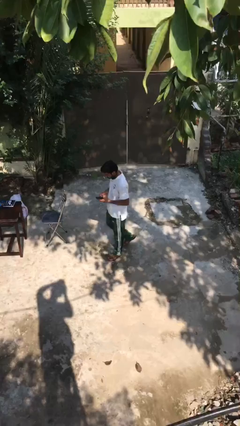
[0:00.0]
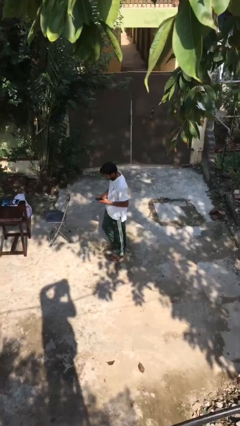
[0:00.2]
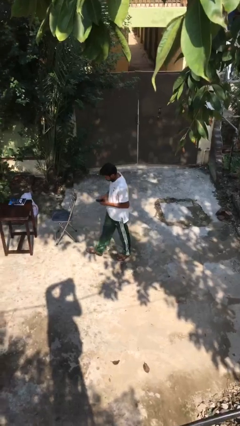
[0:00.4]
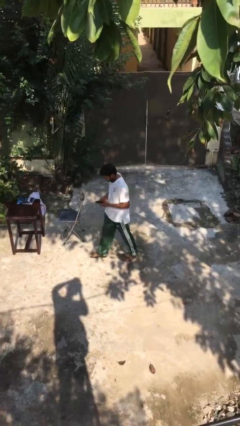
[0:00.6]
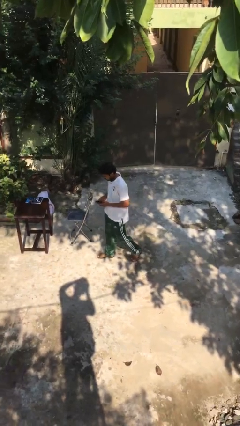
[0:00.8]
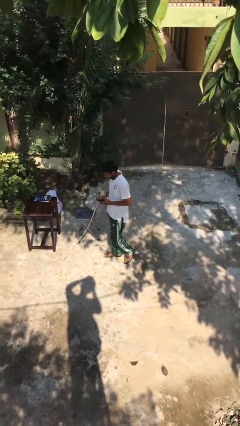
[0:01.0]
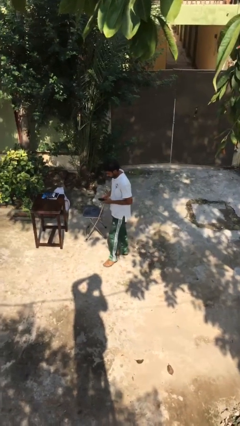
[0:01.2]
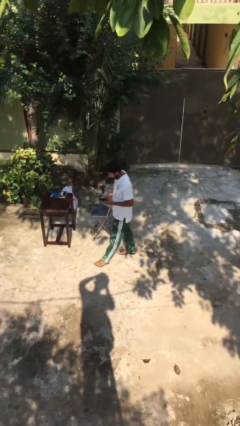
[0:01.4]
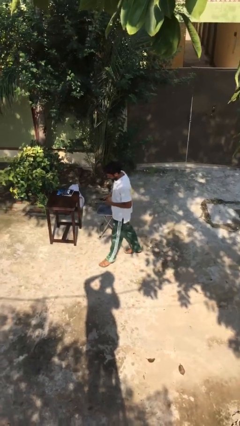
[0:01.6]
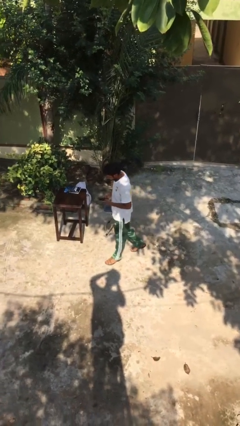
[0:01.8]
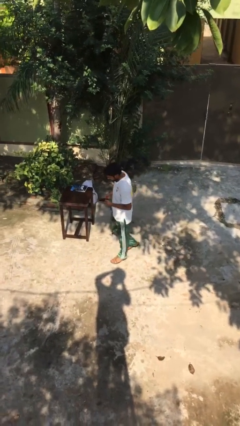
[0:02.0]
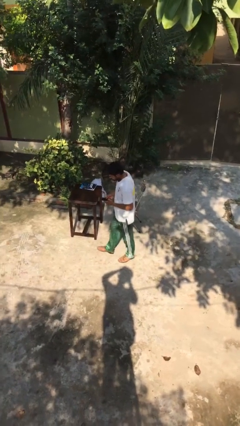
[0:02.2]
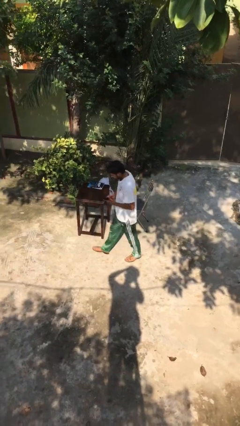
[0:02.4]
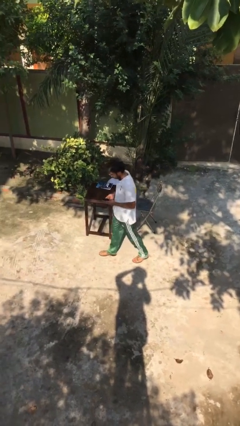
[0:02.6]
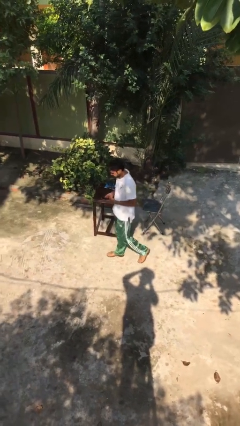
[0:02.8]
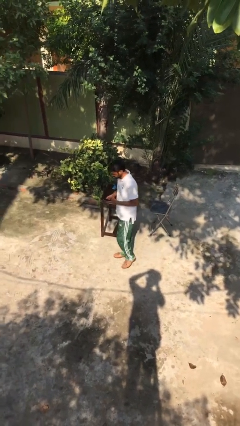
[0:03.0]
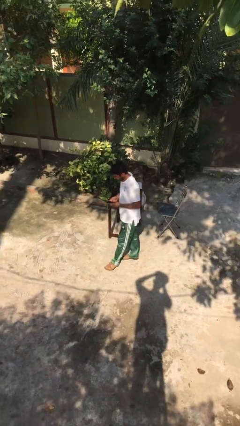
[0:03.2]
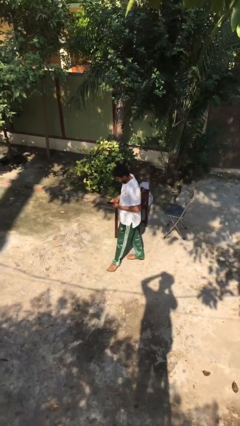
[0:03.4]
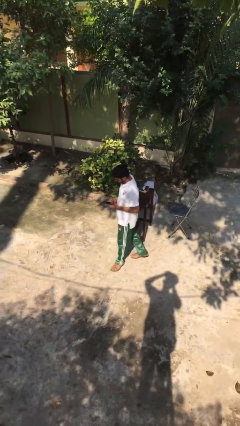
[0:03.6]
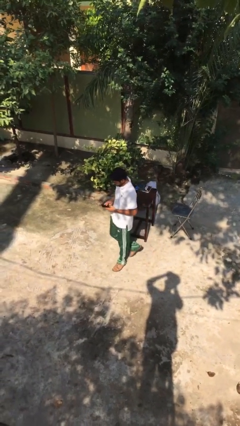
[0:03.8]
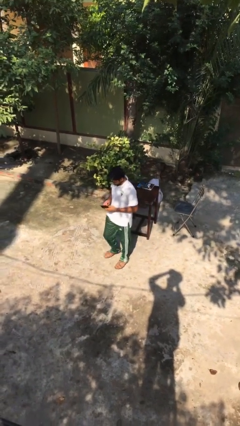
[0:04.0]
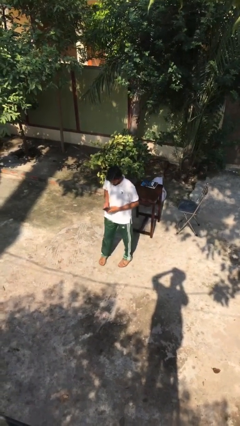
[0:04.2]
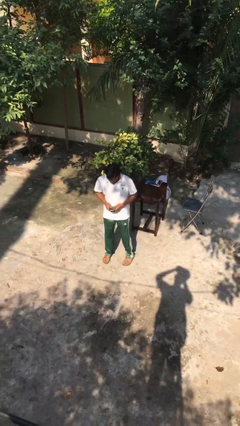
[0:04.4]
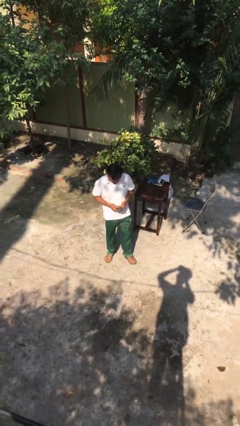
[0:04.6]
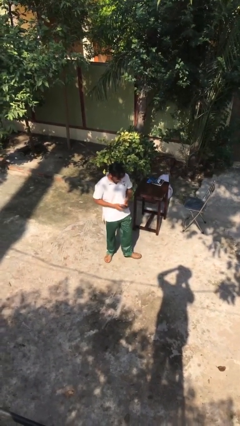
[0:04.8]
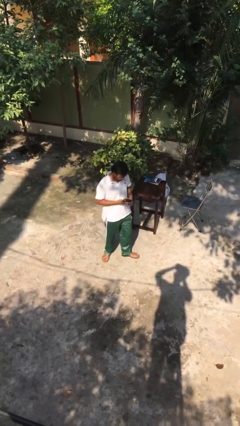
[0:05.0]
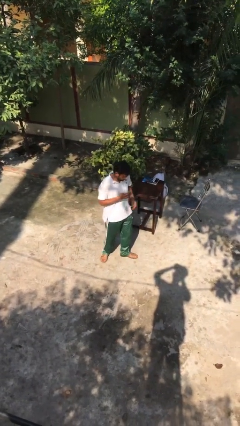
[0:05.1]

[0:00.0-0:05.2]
person texts on phone

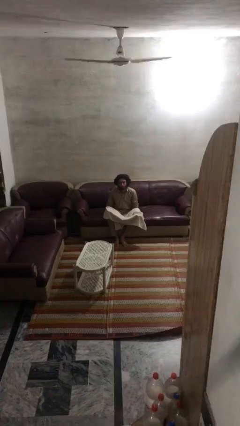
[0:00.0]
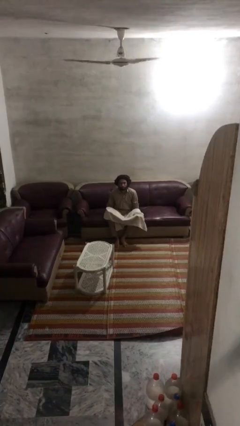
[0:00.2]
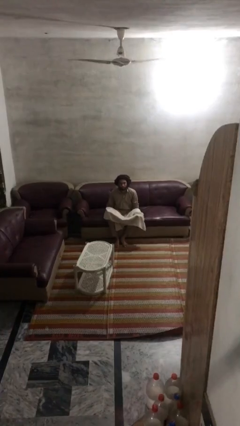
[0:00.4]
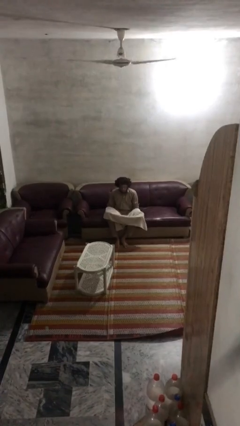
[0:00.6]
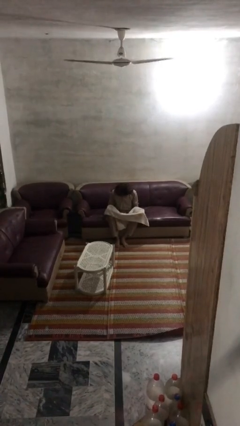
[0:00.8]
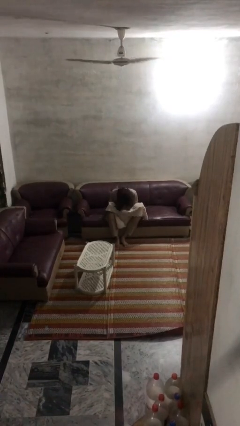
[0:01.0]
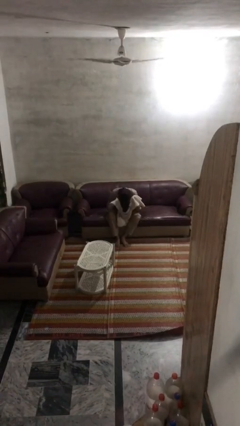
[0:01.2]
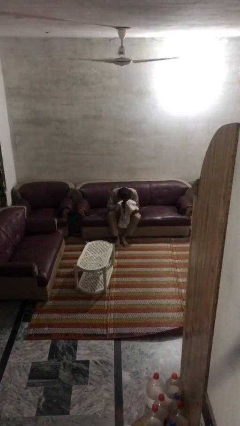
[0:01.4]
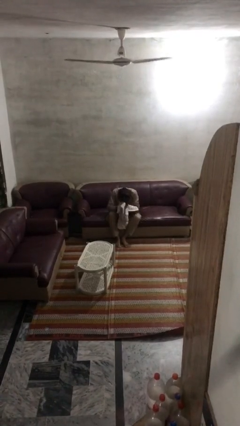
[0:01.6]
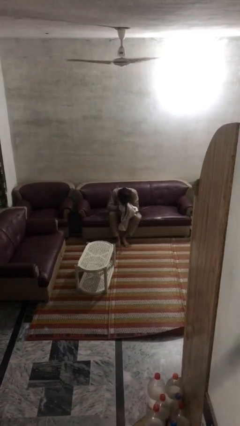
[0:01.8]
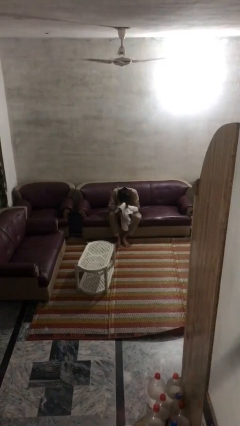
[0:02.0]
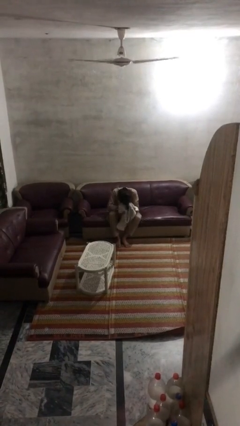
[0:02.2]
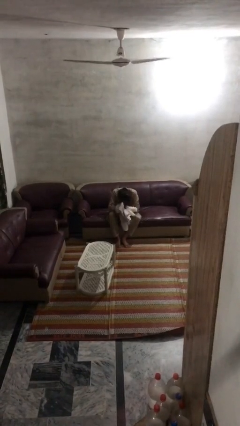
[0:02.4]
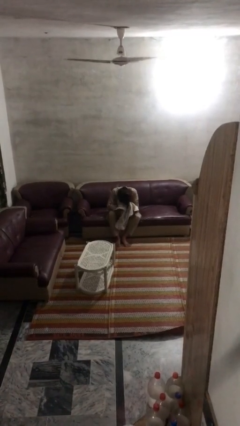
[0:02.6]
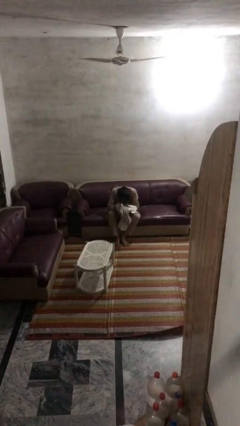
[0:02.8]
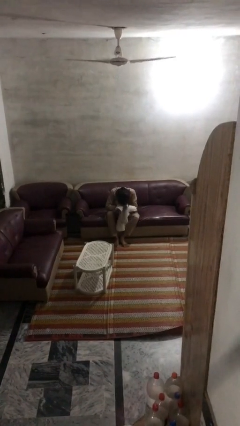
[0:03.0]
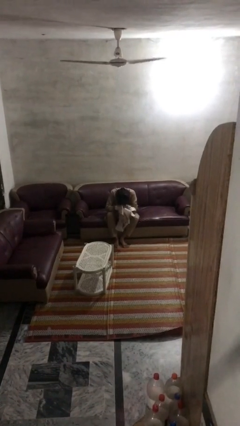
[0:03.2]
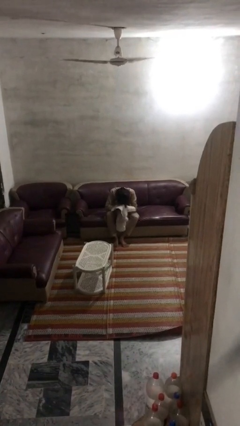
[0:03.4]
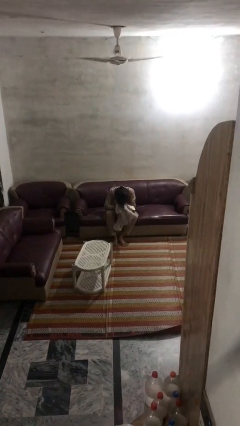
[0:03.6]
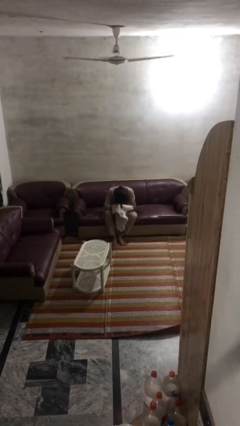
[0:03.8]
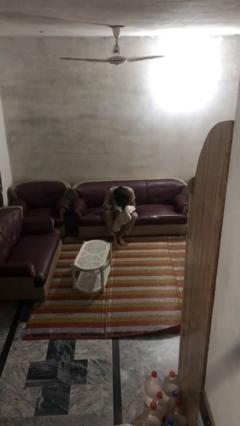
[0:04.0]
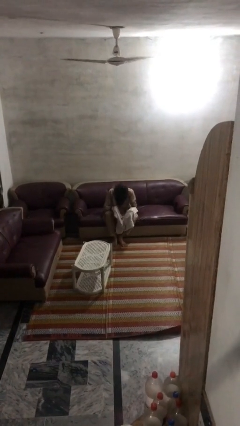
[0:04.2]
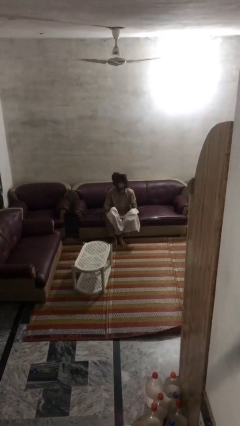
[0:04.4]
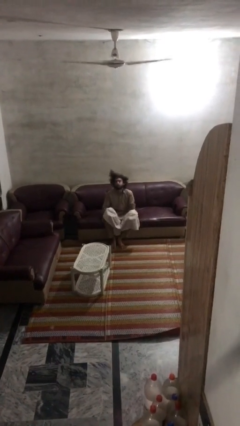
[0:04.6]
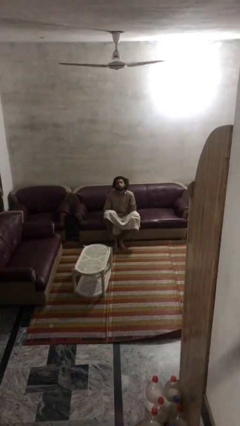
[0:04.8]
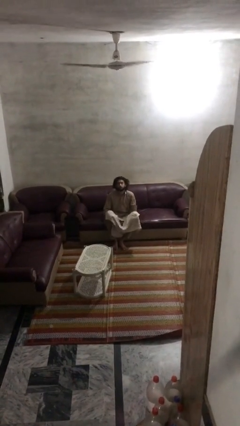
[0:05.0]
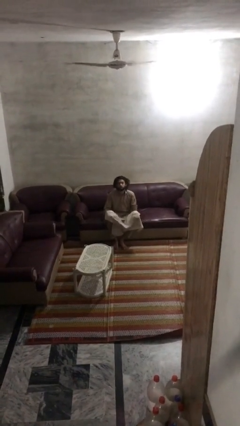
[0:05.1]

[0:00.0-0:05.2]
person dries hair with towel

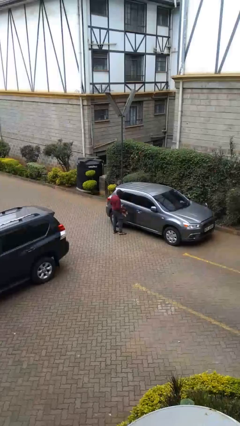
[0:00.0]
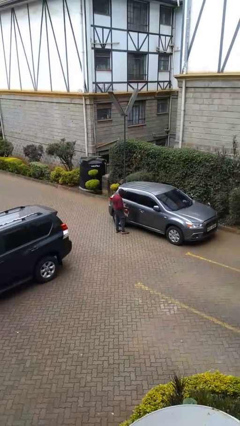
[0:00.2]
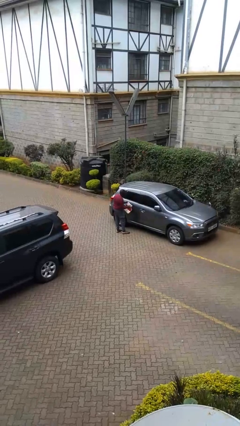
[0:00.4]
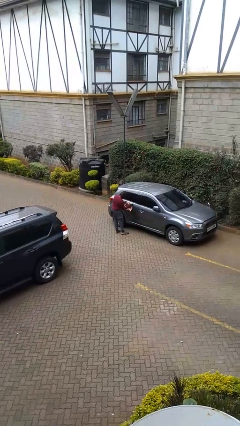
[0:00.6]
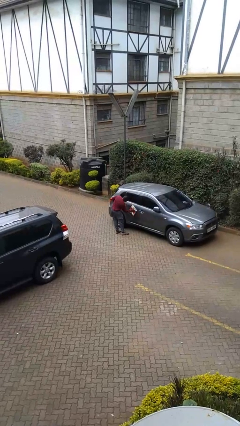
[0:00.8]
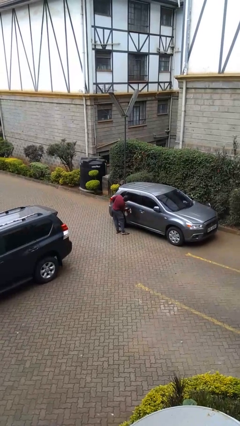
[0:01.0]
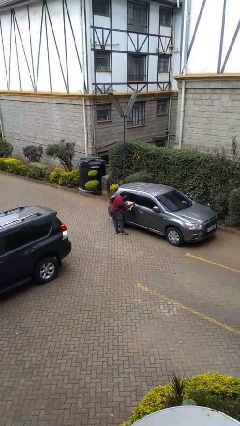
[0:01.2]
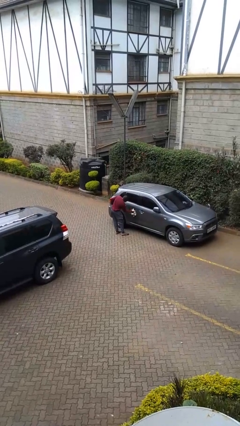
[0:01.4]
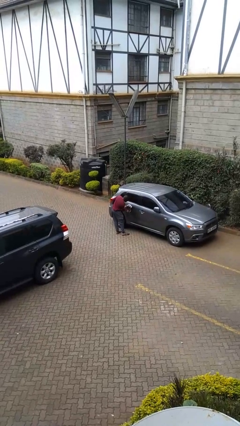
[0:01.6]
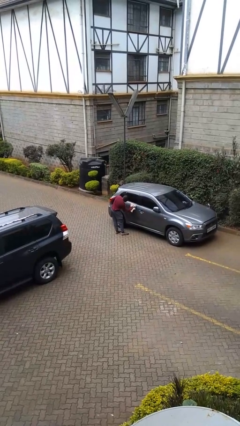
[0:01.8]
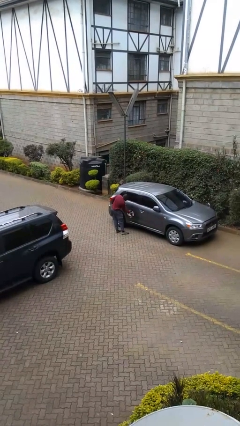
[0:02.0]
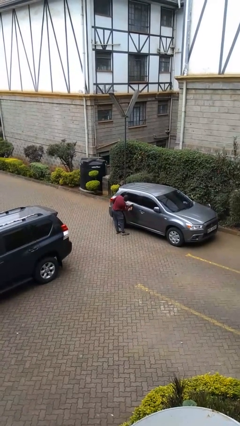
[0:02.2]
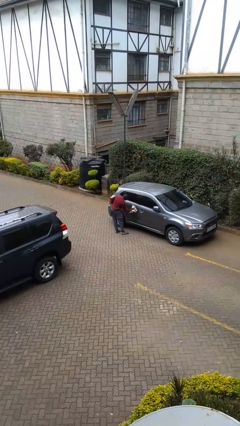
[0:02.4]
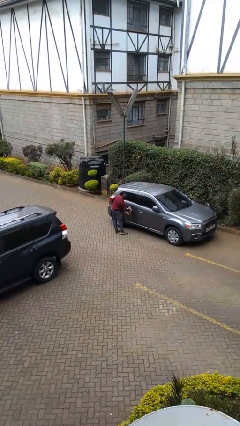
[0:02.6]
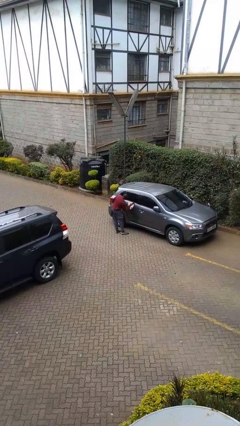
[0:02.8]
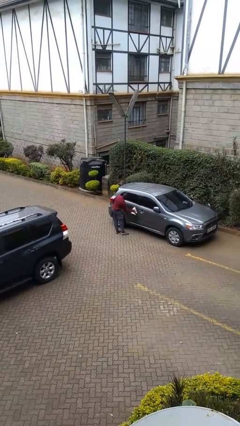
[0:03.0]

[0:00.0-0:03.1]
person polishes car with rag

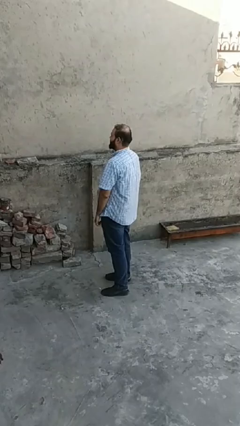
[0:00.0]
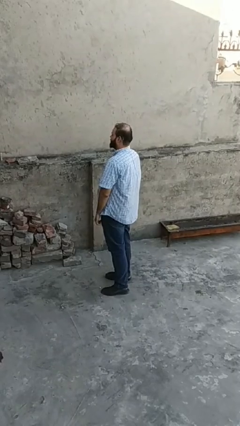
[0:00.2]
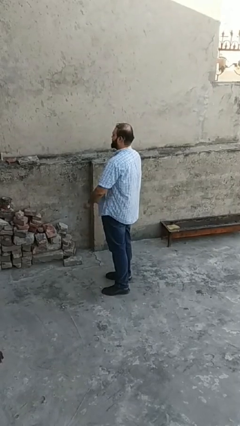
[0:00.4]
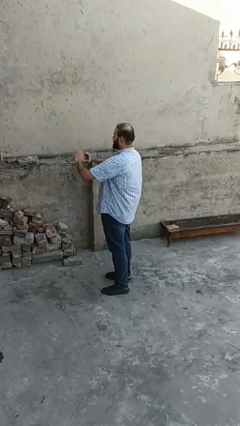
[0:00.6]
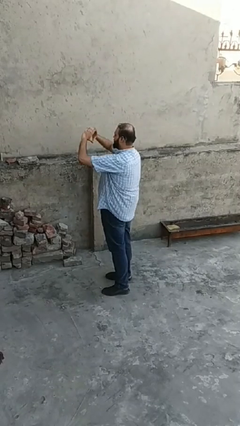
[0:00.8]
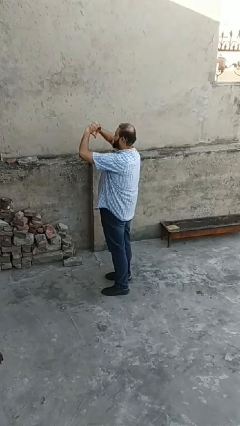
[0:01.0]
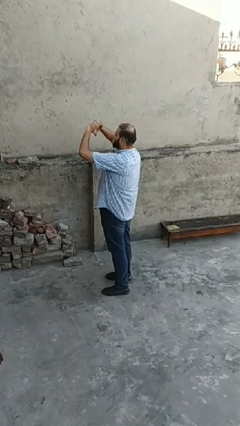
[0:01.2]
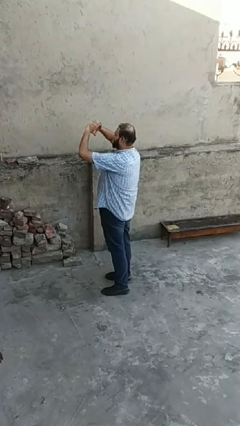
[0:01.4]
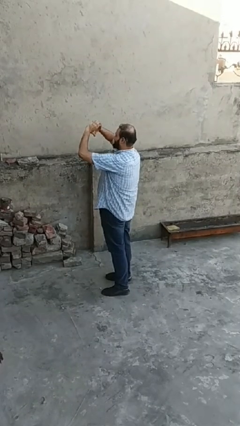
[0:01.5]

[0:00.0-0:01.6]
person gestures heart

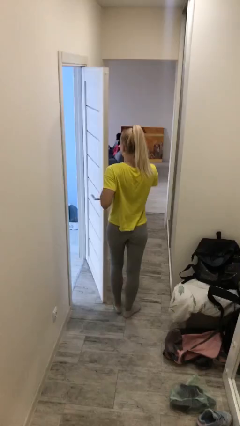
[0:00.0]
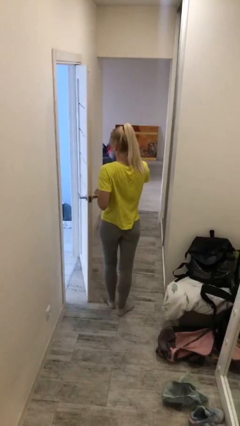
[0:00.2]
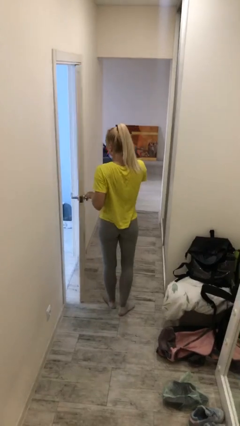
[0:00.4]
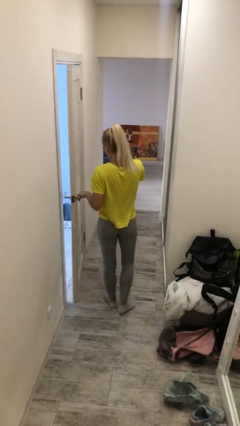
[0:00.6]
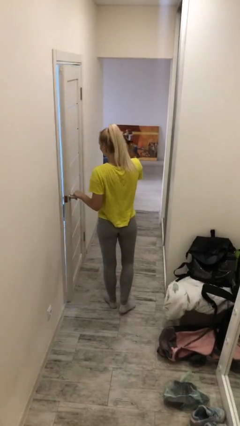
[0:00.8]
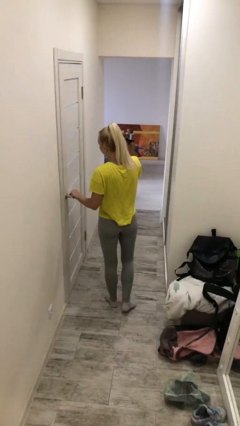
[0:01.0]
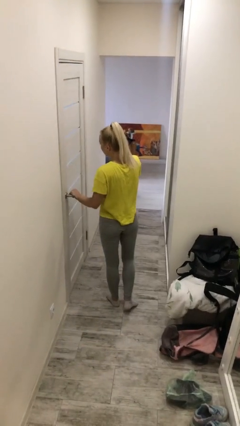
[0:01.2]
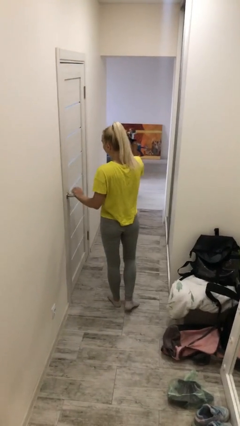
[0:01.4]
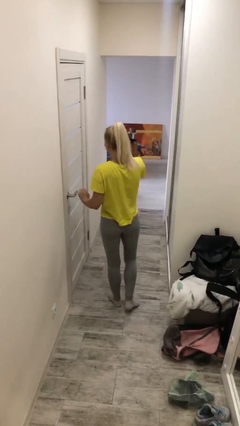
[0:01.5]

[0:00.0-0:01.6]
person closes facility door

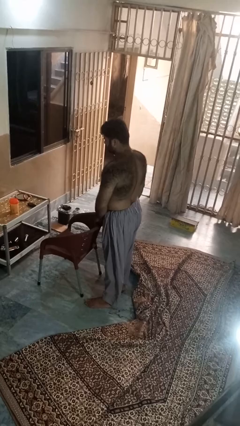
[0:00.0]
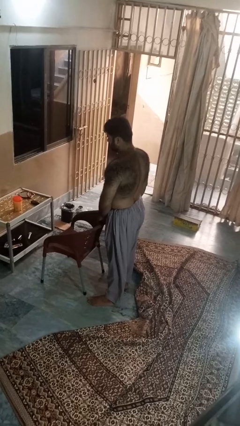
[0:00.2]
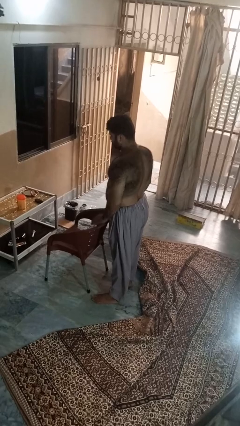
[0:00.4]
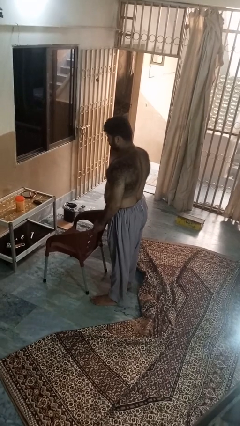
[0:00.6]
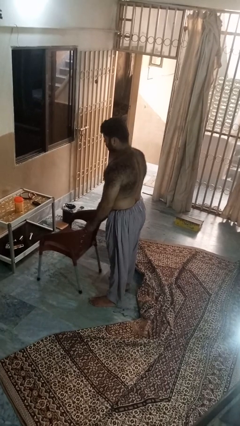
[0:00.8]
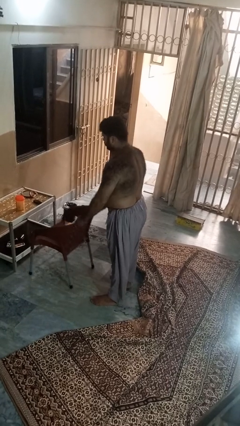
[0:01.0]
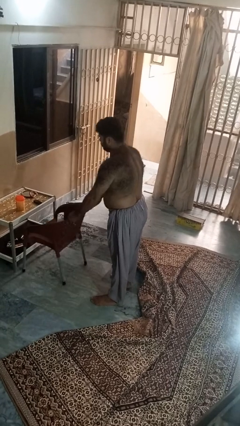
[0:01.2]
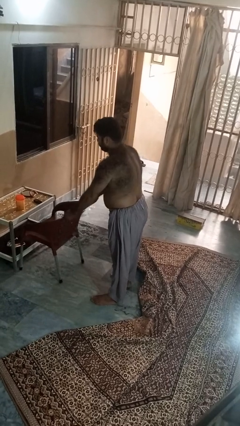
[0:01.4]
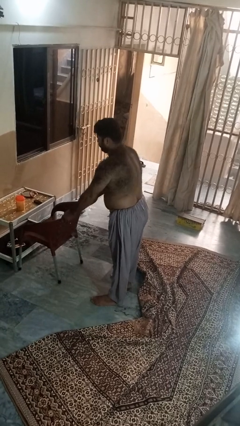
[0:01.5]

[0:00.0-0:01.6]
person pushes in chair
